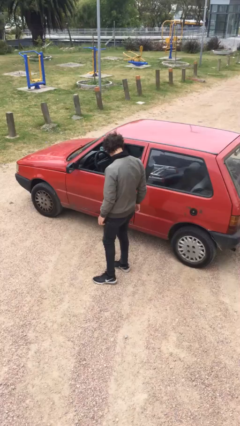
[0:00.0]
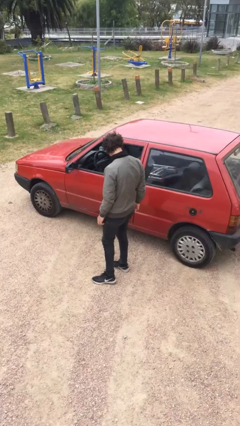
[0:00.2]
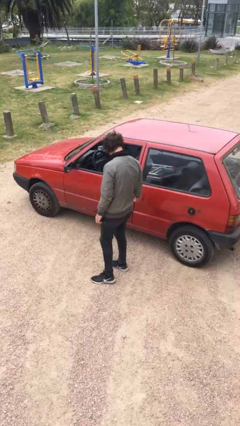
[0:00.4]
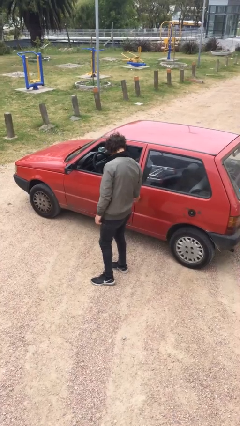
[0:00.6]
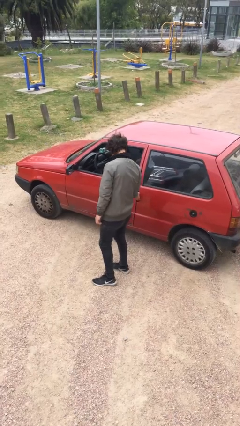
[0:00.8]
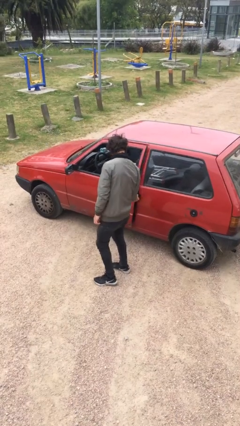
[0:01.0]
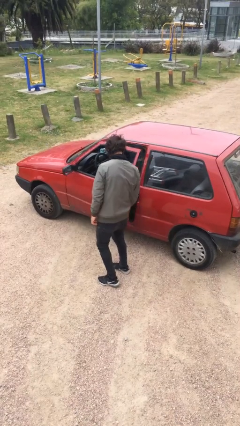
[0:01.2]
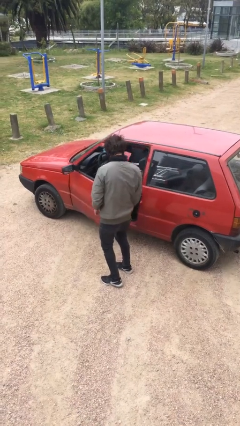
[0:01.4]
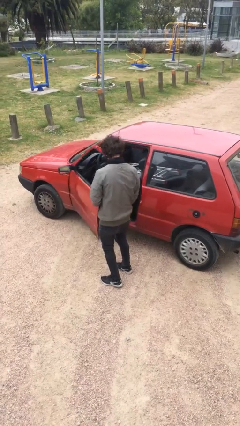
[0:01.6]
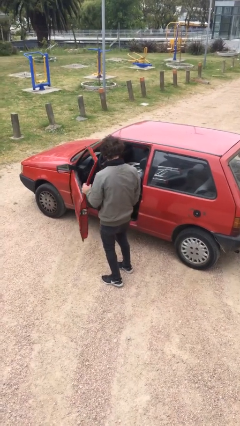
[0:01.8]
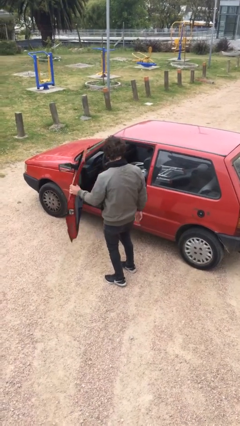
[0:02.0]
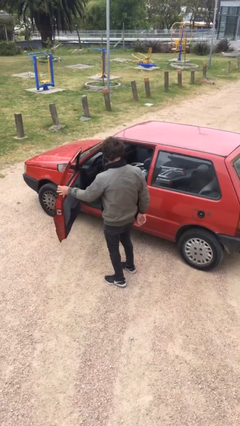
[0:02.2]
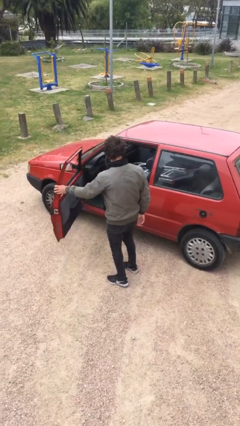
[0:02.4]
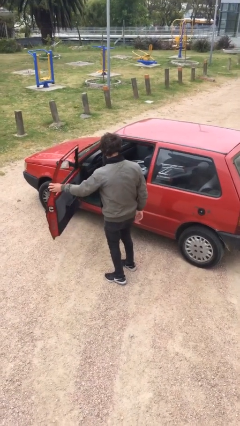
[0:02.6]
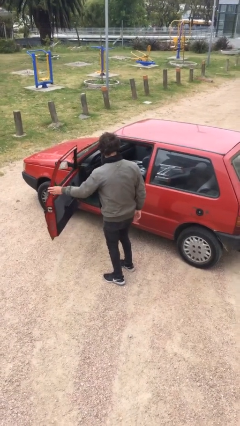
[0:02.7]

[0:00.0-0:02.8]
person opens car door

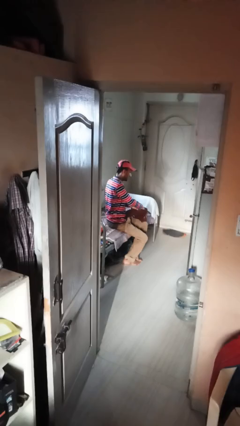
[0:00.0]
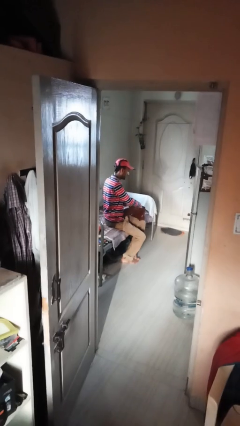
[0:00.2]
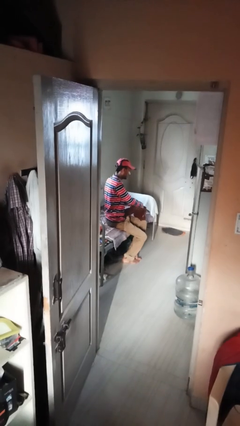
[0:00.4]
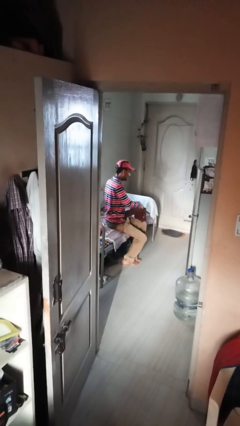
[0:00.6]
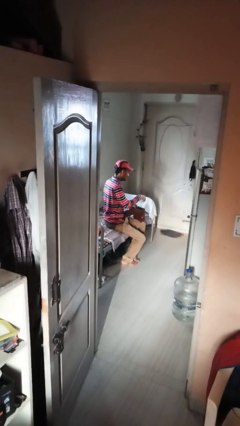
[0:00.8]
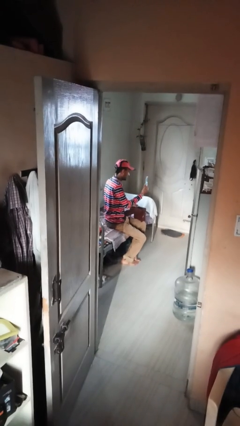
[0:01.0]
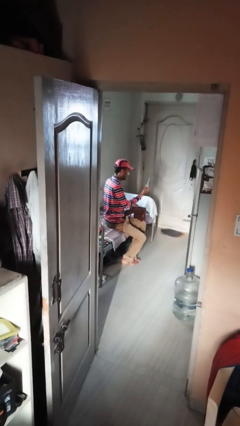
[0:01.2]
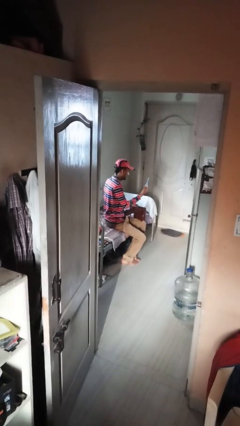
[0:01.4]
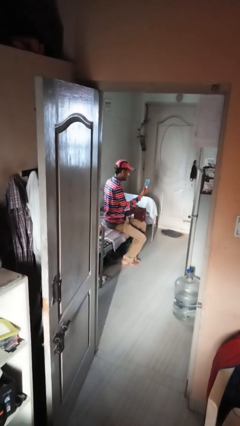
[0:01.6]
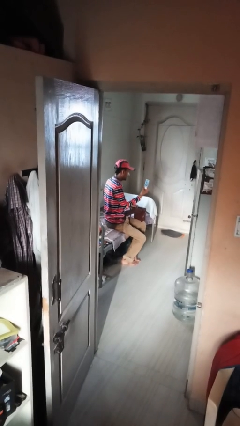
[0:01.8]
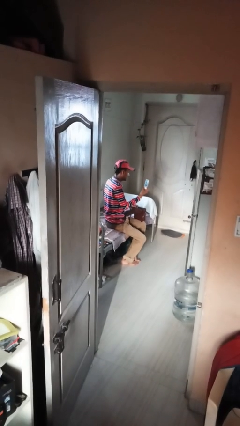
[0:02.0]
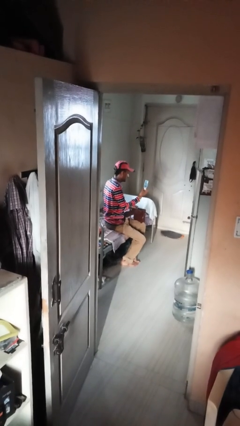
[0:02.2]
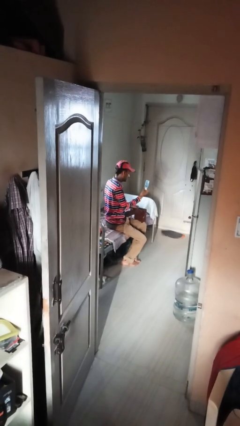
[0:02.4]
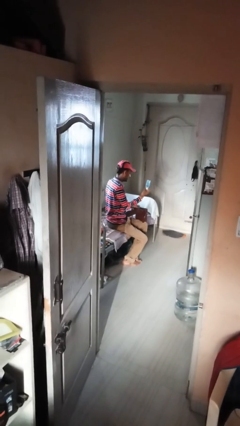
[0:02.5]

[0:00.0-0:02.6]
person takes object from purse

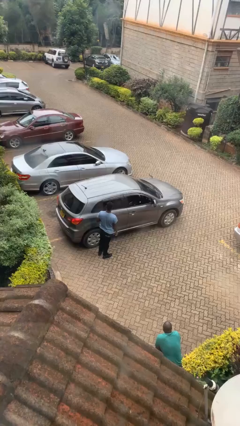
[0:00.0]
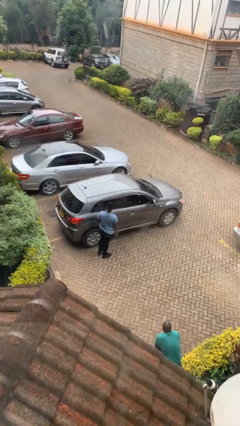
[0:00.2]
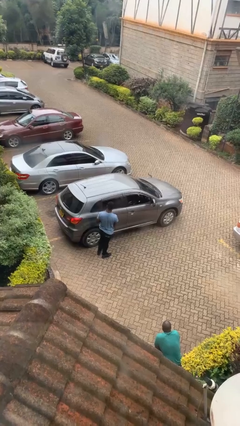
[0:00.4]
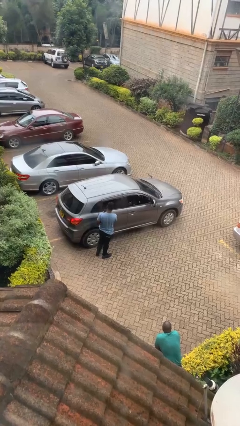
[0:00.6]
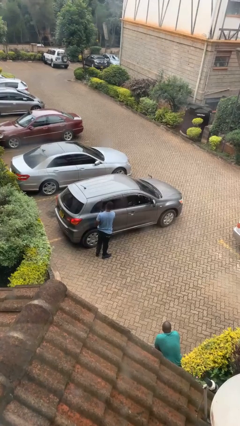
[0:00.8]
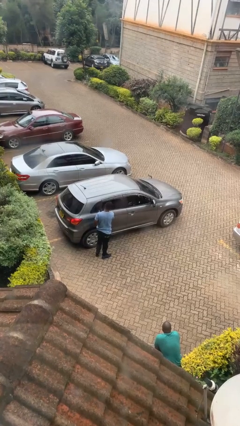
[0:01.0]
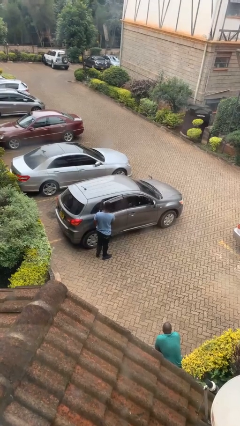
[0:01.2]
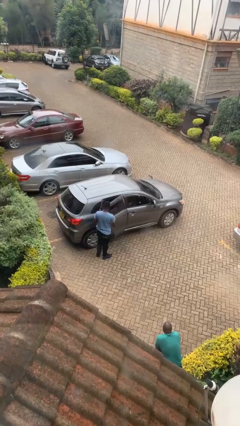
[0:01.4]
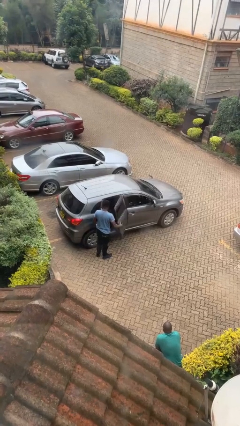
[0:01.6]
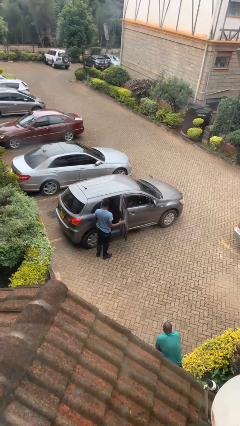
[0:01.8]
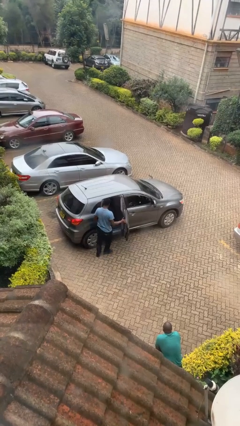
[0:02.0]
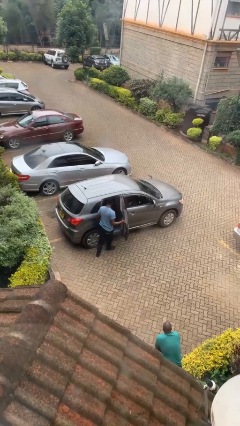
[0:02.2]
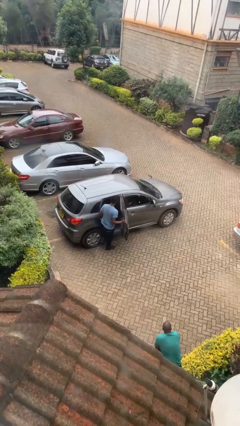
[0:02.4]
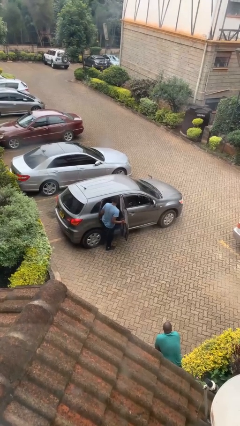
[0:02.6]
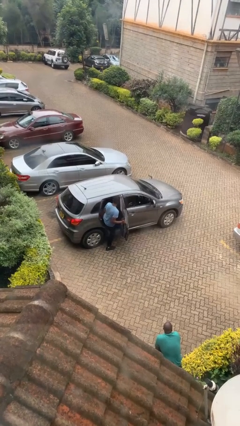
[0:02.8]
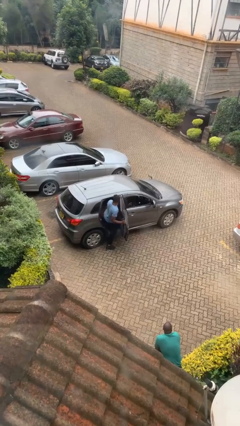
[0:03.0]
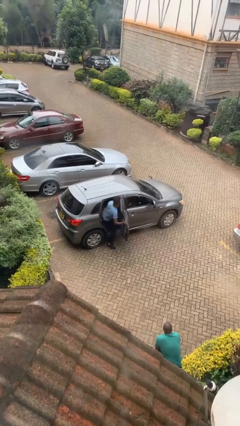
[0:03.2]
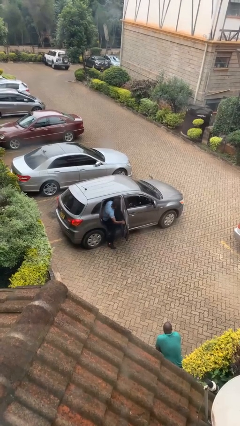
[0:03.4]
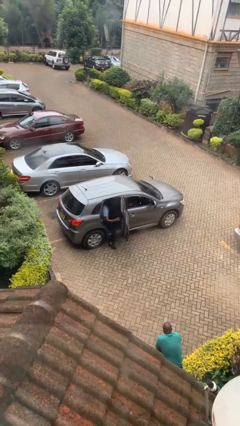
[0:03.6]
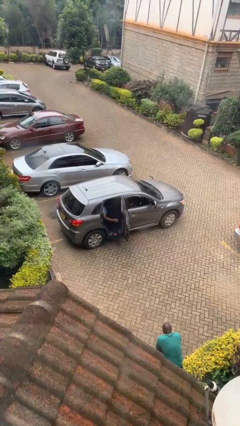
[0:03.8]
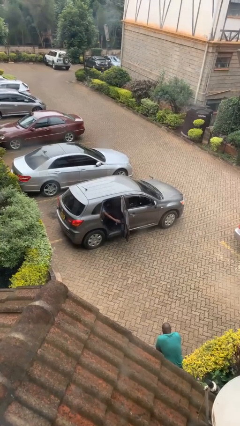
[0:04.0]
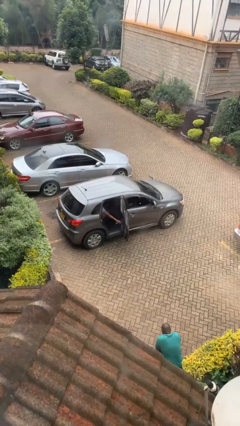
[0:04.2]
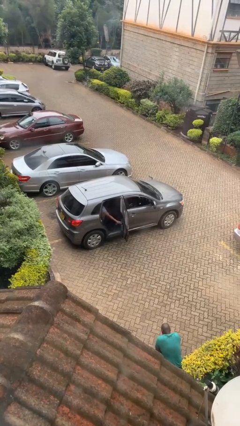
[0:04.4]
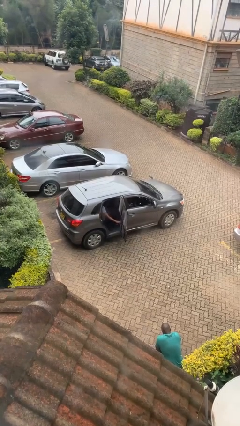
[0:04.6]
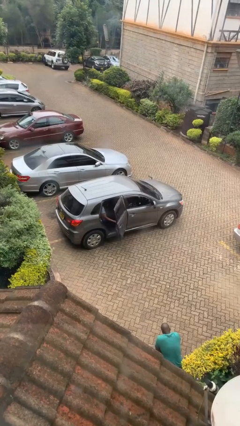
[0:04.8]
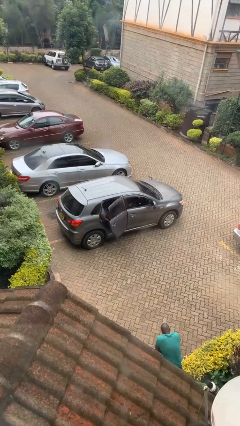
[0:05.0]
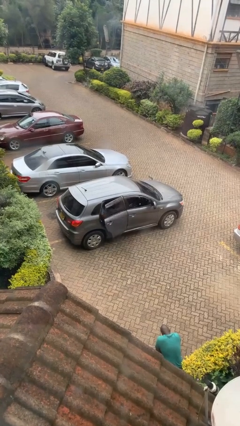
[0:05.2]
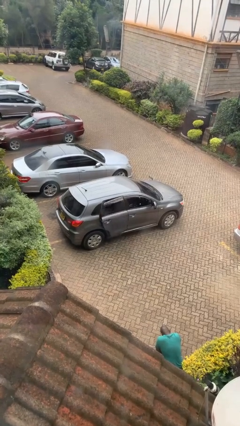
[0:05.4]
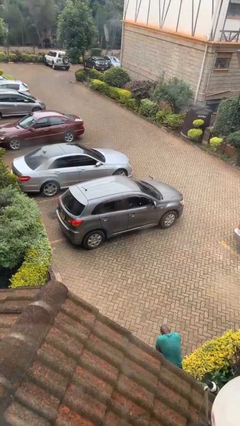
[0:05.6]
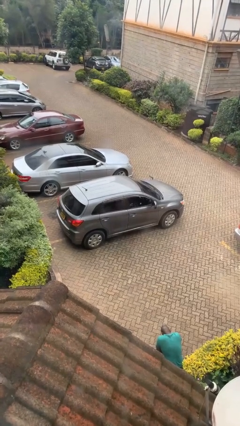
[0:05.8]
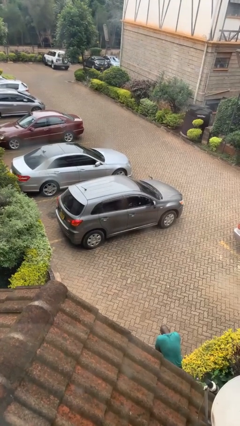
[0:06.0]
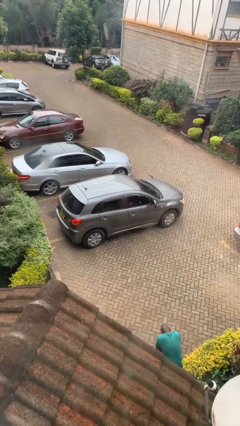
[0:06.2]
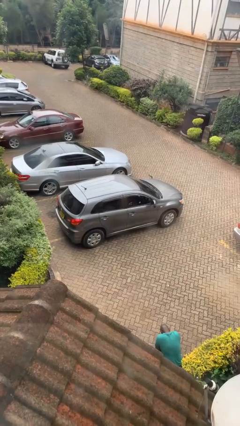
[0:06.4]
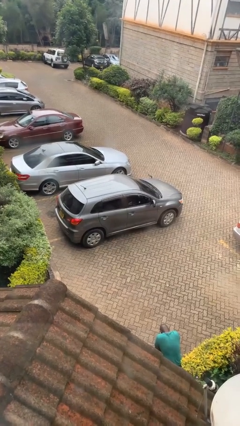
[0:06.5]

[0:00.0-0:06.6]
car picks up person

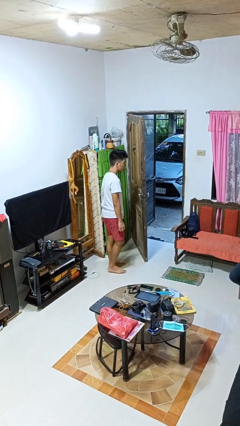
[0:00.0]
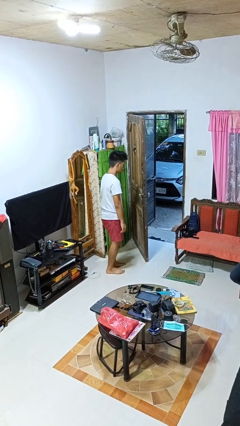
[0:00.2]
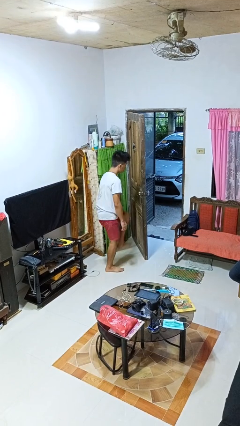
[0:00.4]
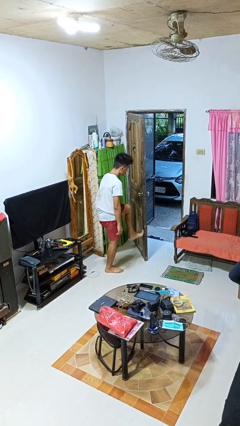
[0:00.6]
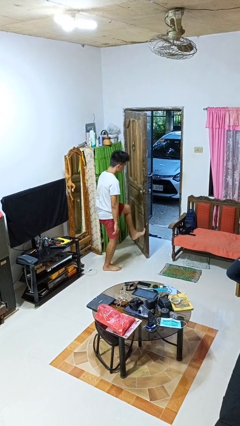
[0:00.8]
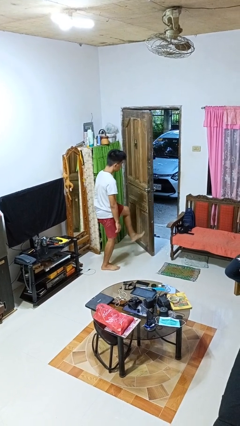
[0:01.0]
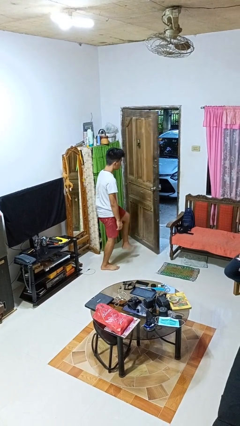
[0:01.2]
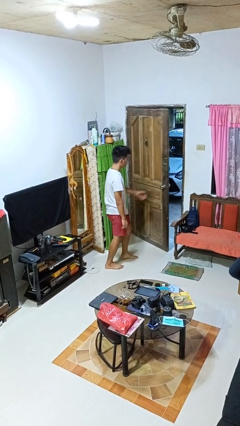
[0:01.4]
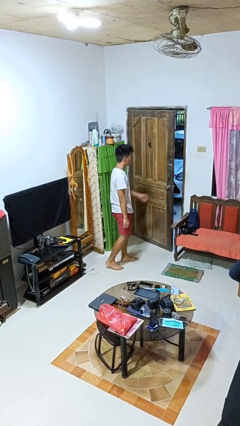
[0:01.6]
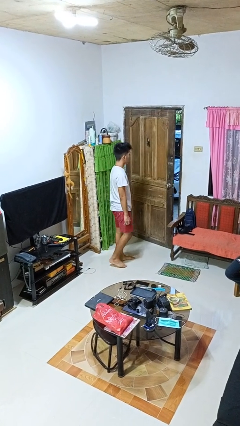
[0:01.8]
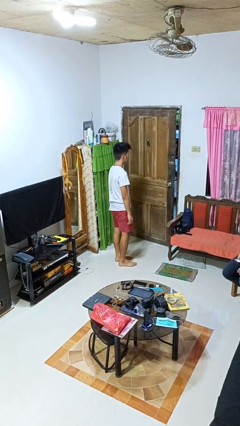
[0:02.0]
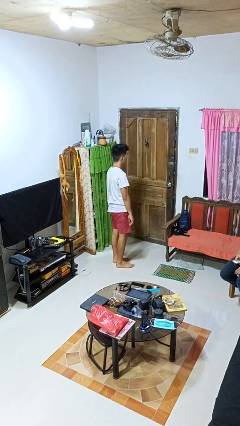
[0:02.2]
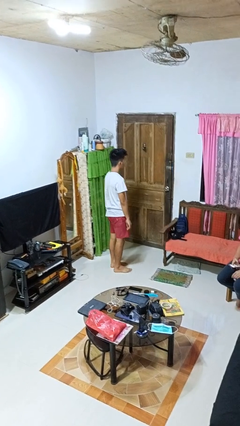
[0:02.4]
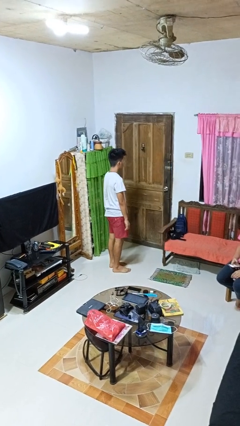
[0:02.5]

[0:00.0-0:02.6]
person closes door with foot

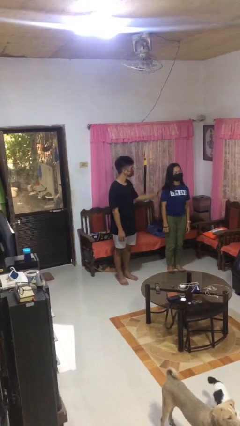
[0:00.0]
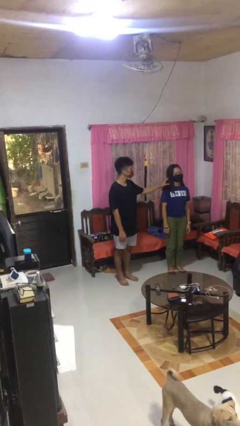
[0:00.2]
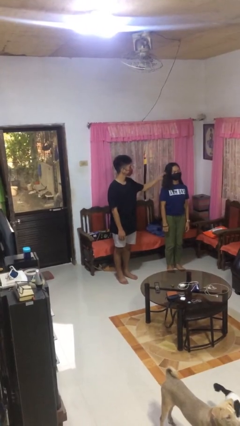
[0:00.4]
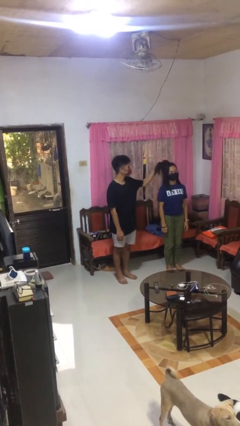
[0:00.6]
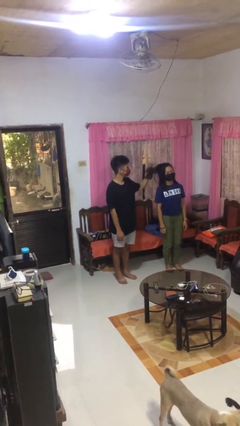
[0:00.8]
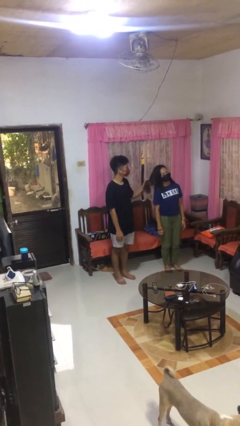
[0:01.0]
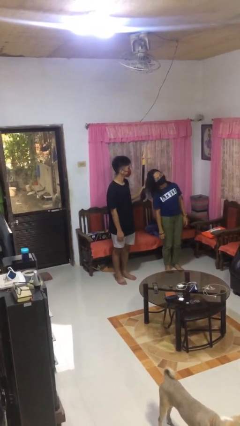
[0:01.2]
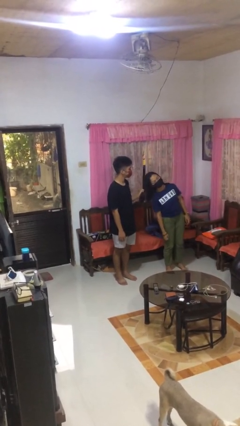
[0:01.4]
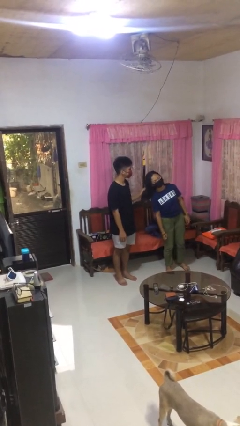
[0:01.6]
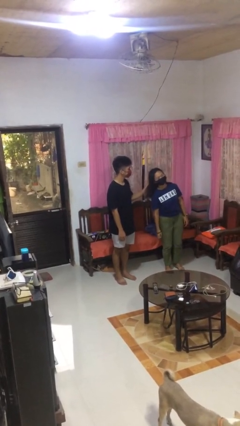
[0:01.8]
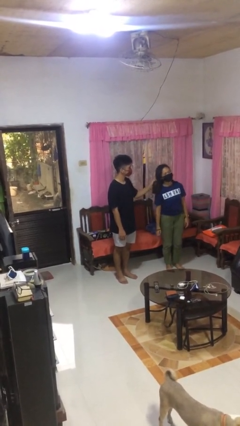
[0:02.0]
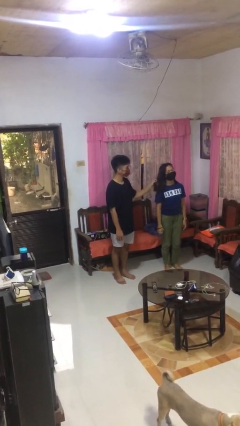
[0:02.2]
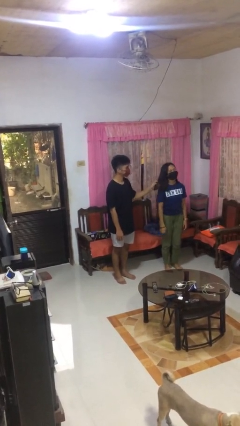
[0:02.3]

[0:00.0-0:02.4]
person grabs person by hair

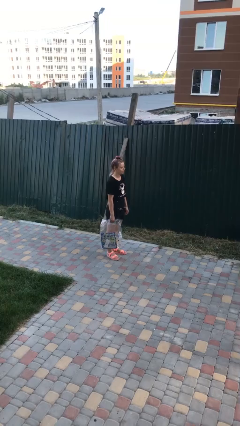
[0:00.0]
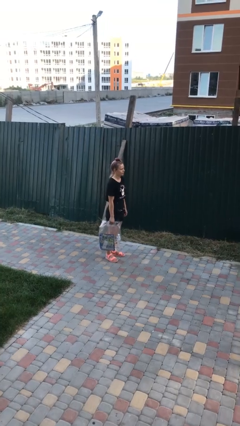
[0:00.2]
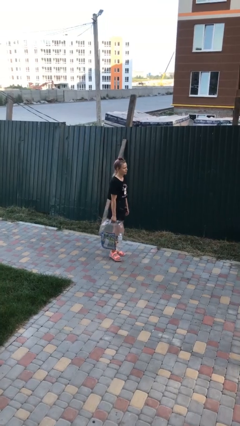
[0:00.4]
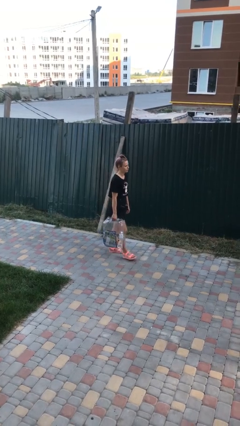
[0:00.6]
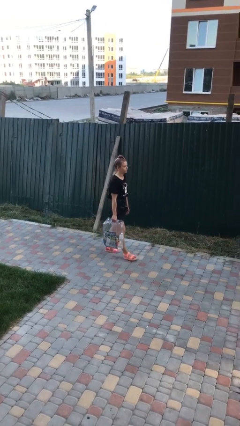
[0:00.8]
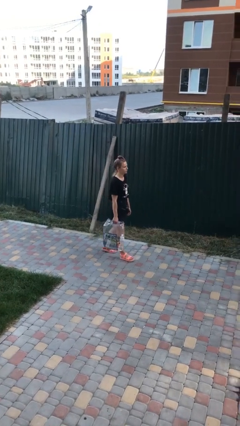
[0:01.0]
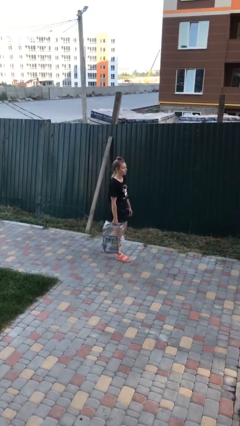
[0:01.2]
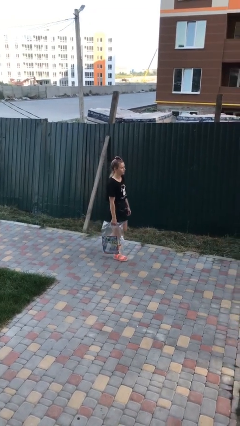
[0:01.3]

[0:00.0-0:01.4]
person carries groceries
